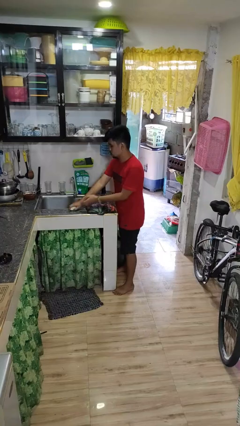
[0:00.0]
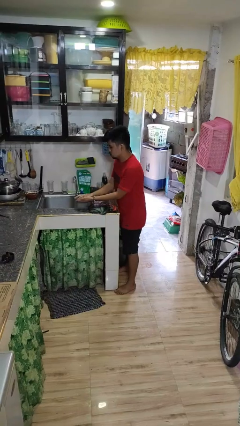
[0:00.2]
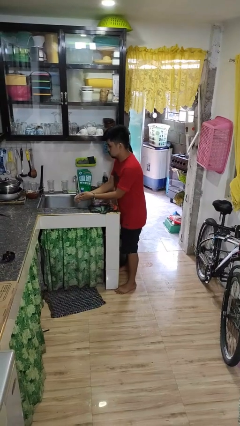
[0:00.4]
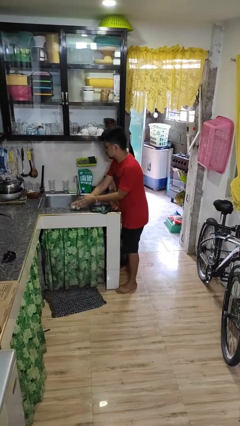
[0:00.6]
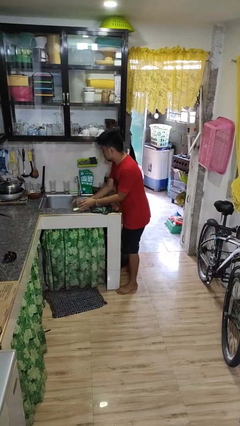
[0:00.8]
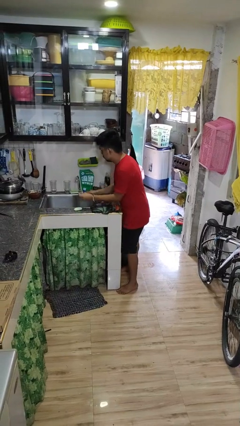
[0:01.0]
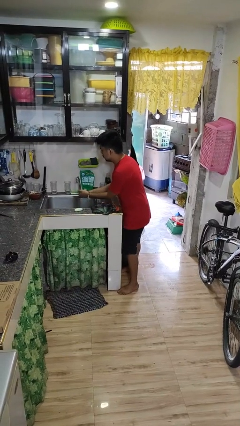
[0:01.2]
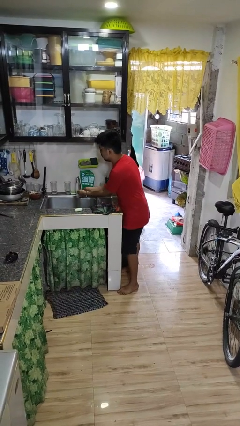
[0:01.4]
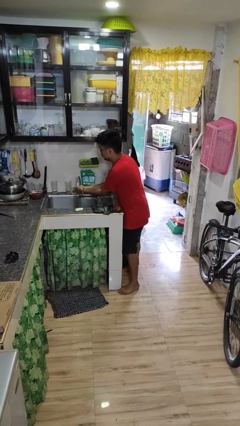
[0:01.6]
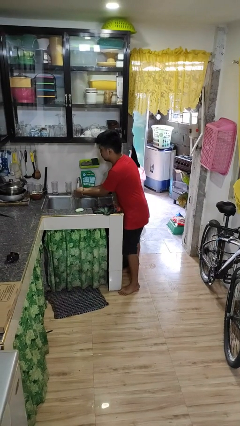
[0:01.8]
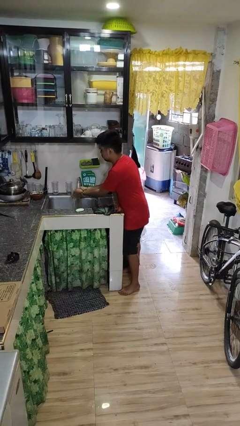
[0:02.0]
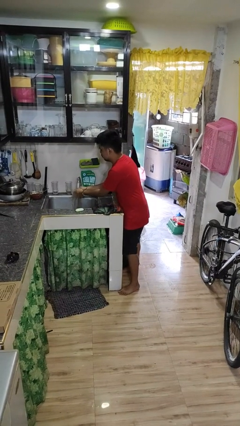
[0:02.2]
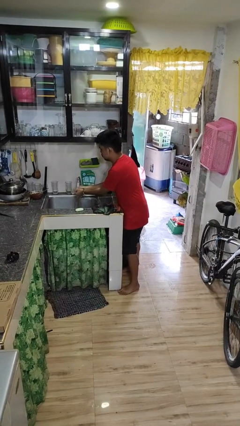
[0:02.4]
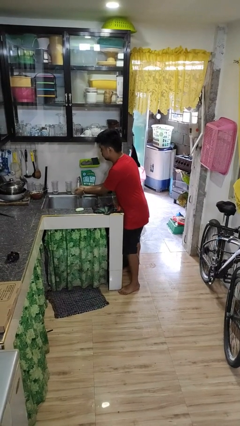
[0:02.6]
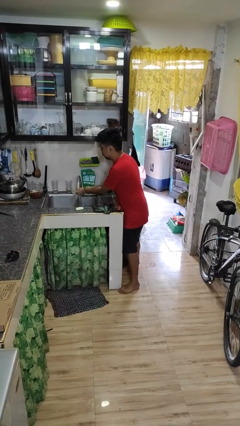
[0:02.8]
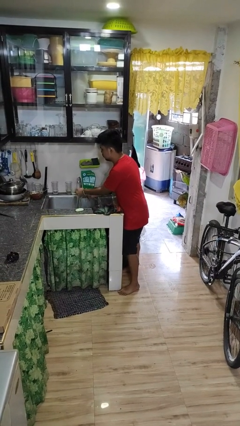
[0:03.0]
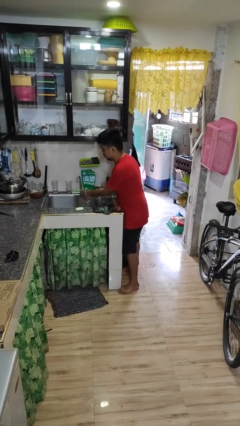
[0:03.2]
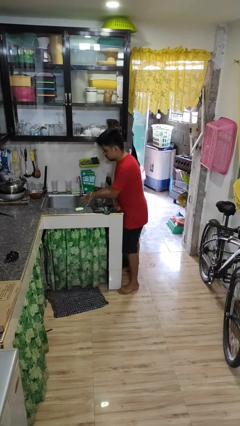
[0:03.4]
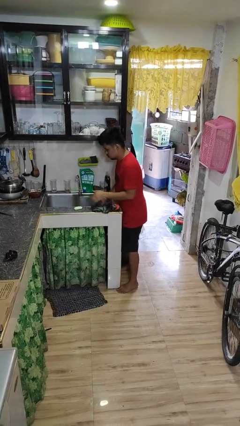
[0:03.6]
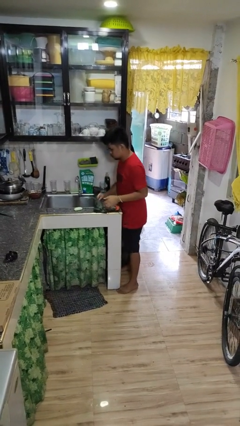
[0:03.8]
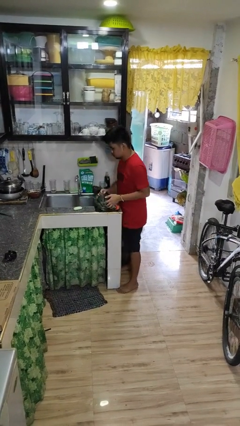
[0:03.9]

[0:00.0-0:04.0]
person washes hands

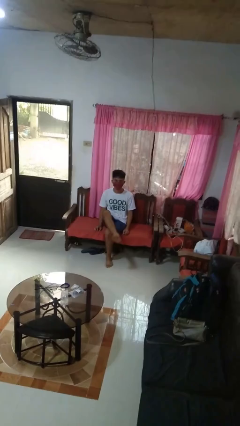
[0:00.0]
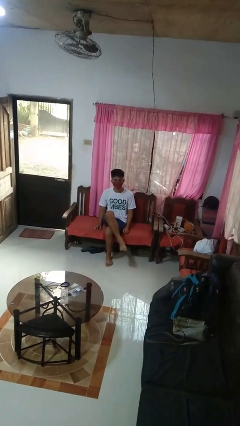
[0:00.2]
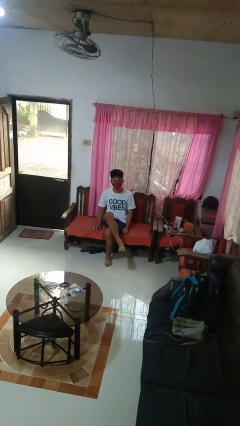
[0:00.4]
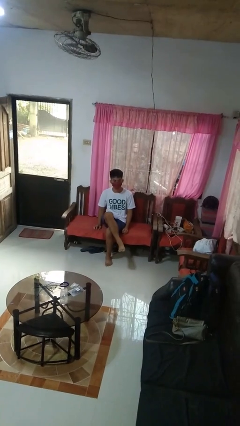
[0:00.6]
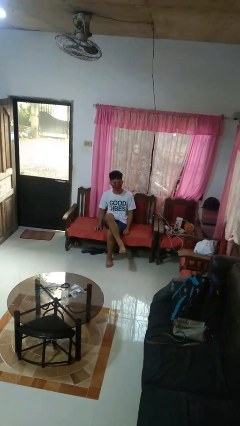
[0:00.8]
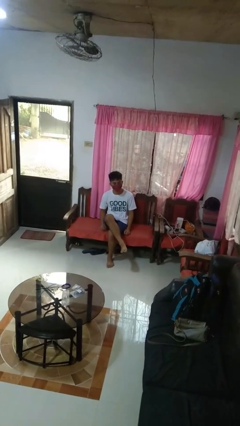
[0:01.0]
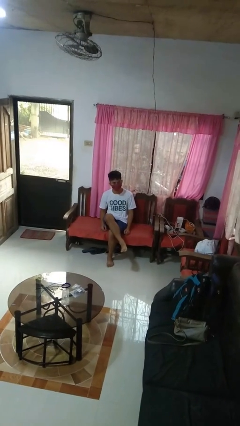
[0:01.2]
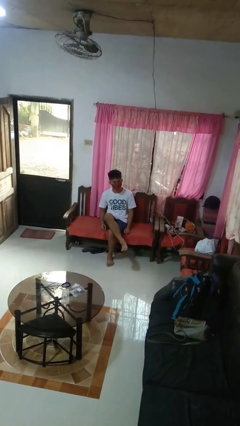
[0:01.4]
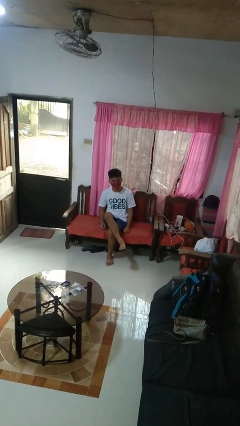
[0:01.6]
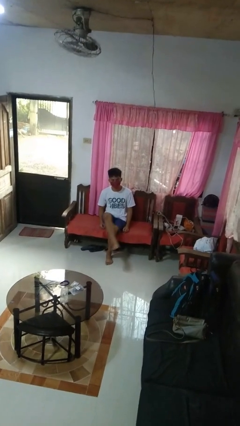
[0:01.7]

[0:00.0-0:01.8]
person crosses legs

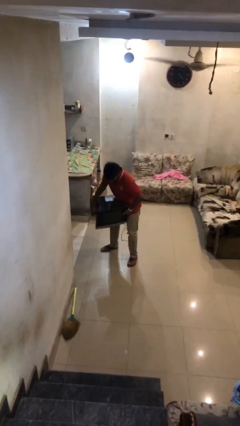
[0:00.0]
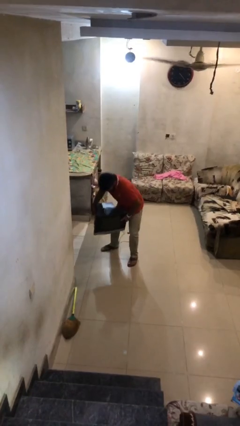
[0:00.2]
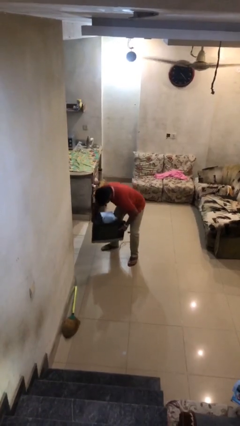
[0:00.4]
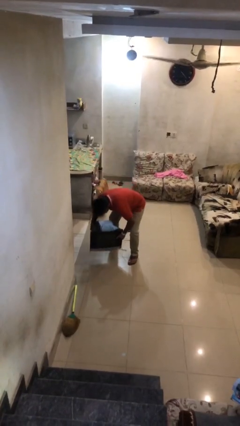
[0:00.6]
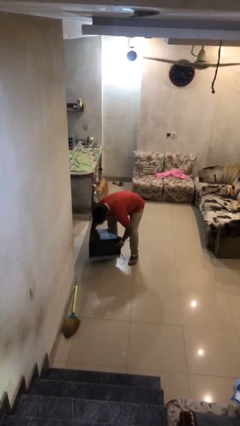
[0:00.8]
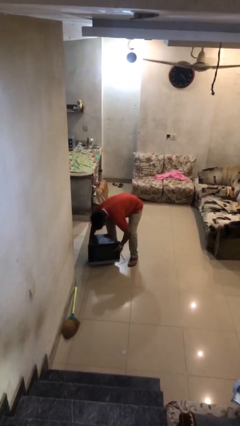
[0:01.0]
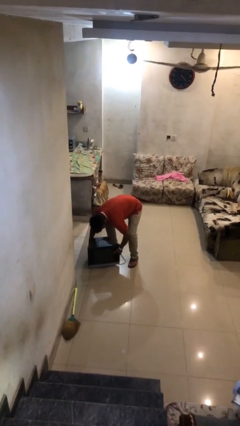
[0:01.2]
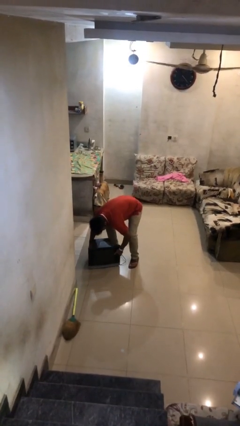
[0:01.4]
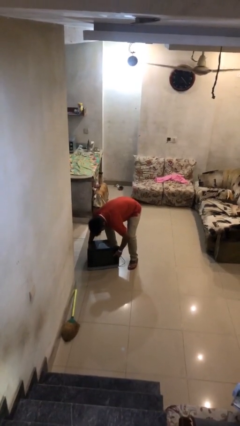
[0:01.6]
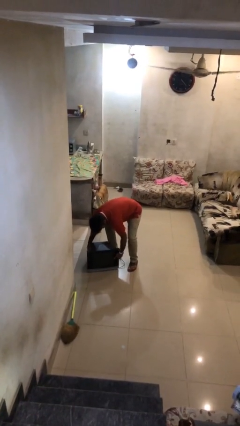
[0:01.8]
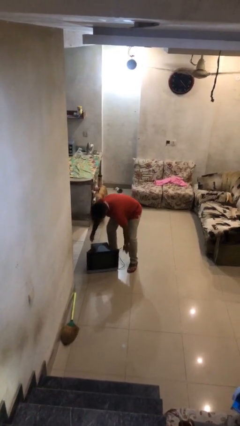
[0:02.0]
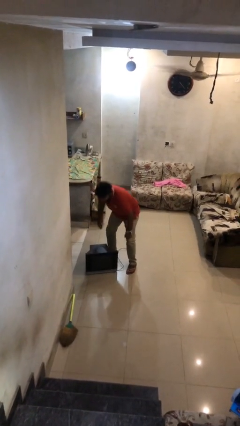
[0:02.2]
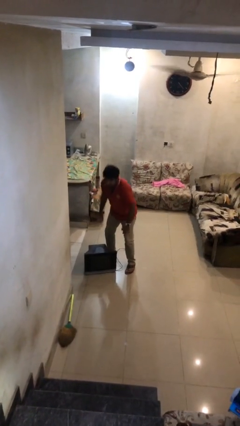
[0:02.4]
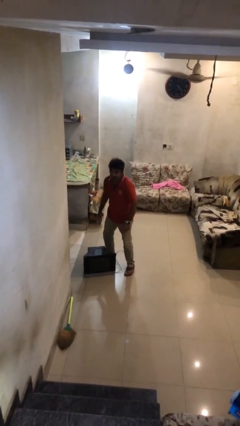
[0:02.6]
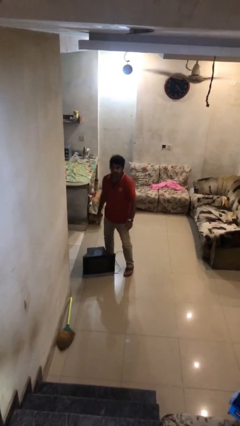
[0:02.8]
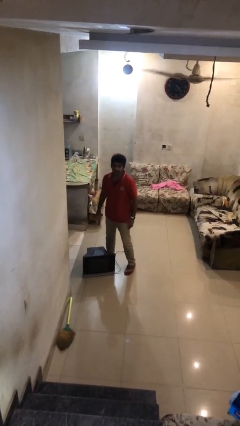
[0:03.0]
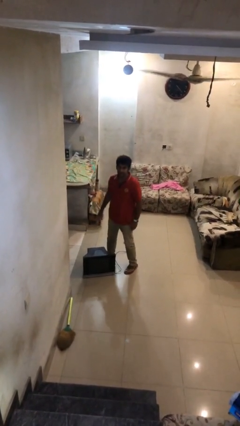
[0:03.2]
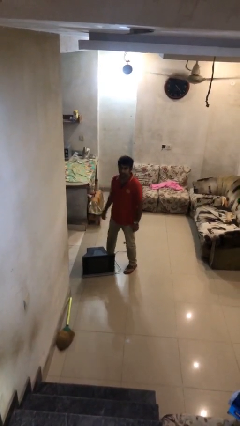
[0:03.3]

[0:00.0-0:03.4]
person puts down object on floor

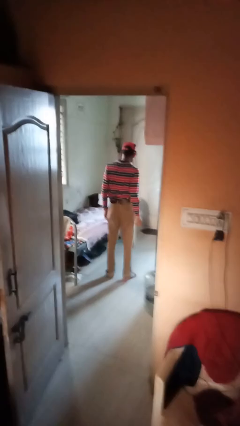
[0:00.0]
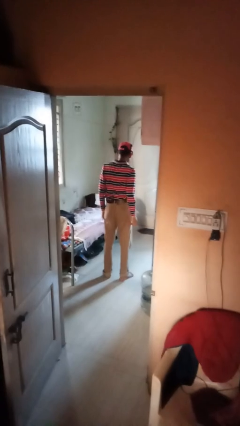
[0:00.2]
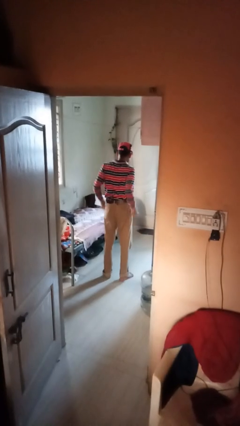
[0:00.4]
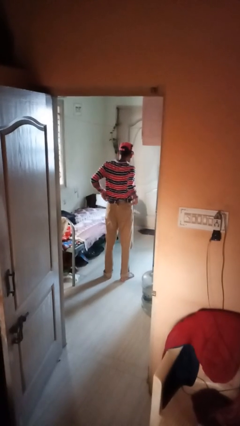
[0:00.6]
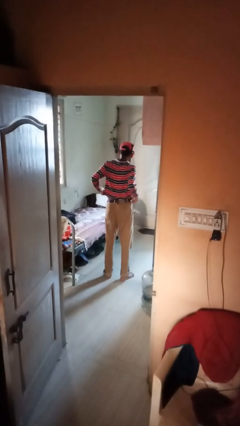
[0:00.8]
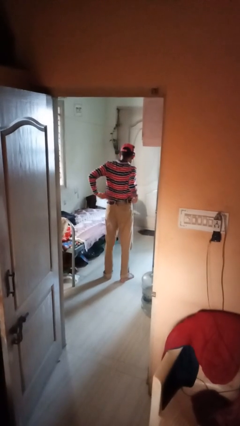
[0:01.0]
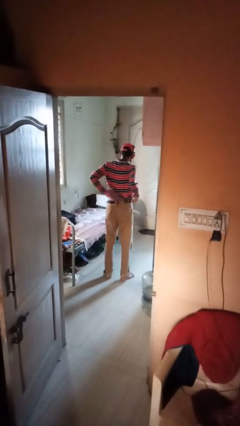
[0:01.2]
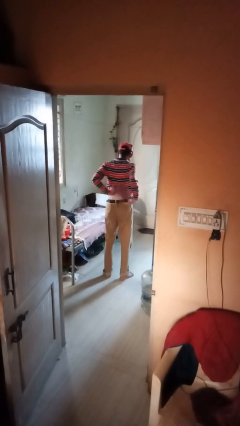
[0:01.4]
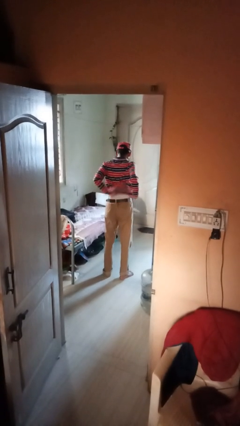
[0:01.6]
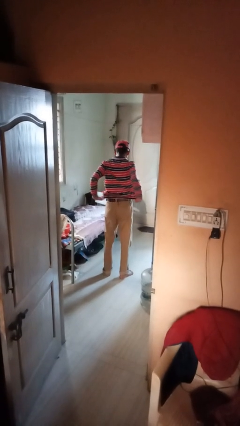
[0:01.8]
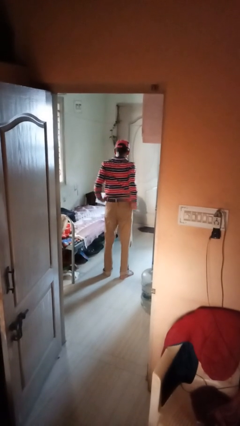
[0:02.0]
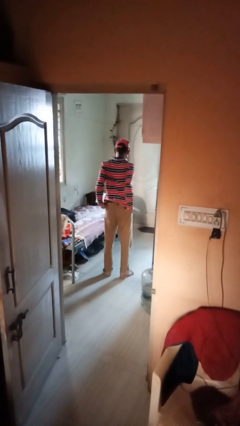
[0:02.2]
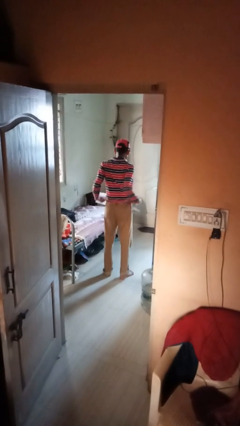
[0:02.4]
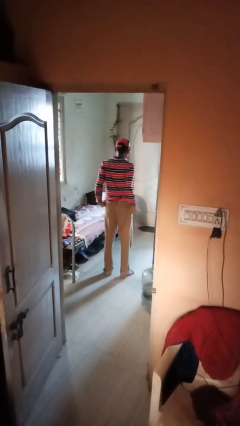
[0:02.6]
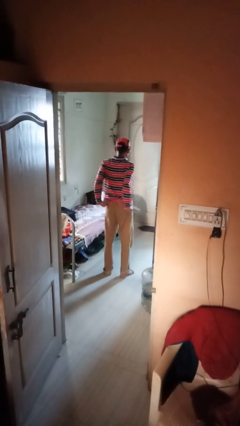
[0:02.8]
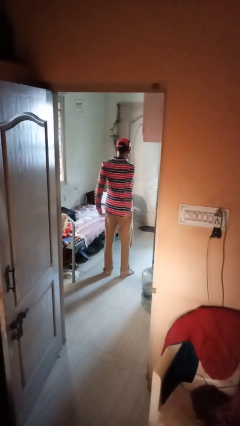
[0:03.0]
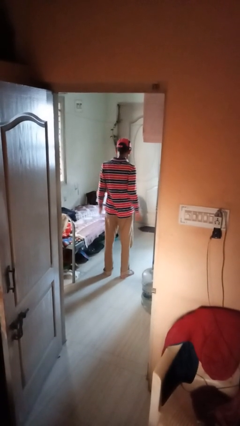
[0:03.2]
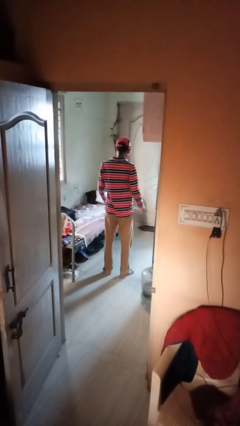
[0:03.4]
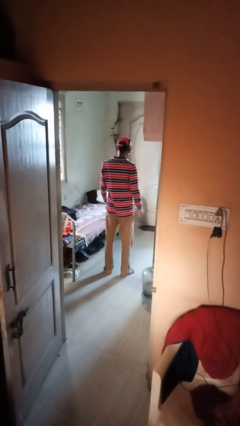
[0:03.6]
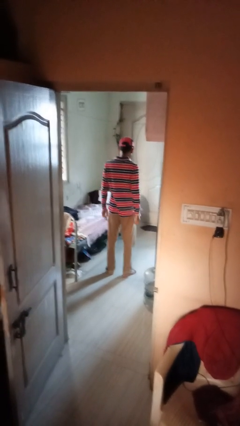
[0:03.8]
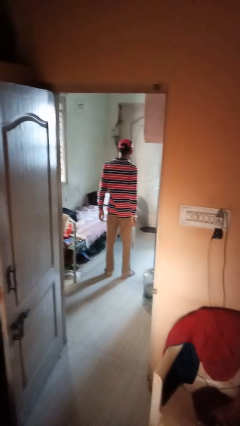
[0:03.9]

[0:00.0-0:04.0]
person untucks shirt

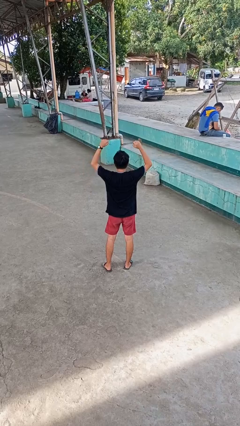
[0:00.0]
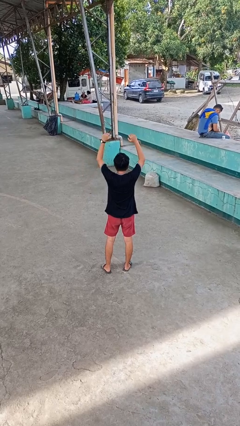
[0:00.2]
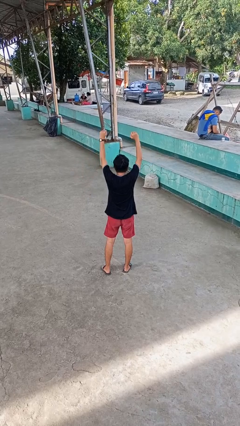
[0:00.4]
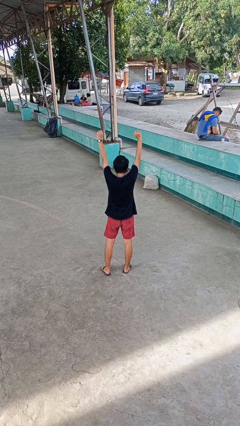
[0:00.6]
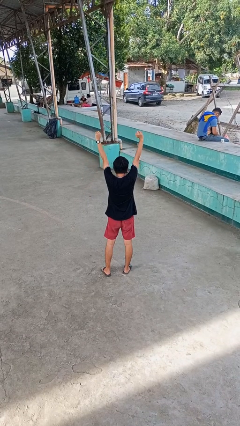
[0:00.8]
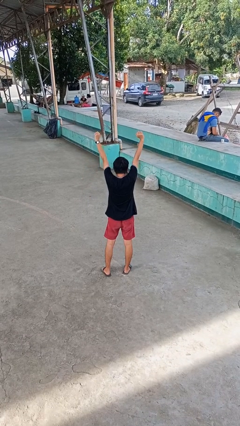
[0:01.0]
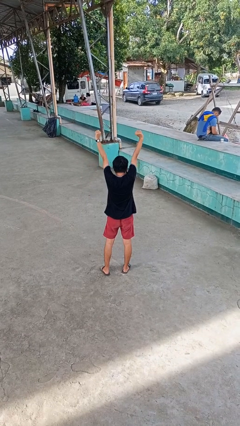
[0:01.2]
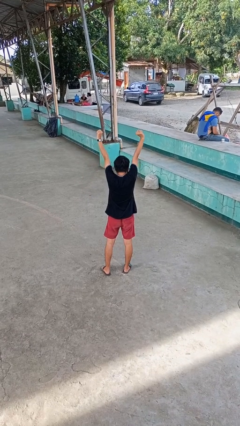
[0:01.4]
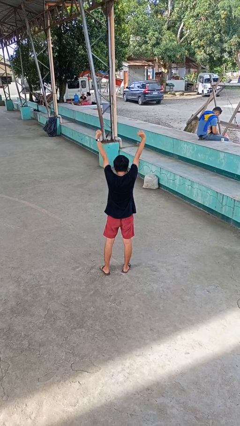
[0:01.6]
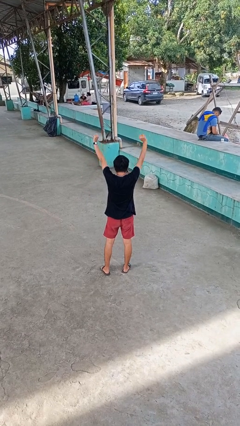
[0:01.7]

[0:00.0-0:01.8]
person stretches arms over head

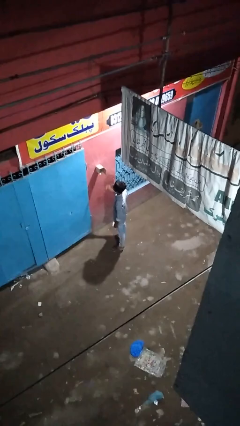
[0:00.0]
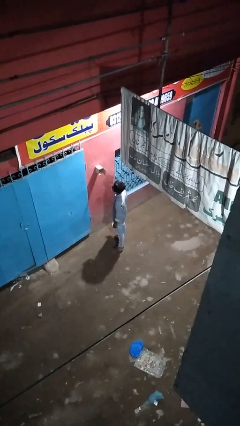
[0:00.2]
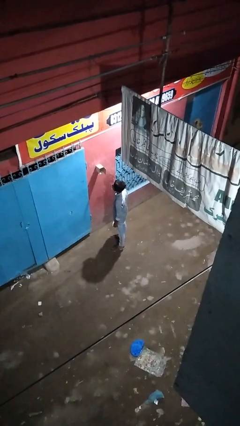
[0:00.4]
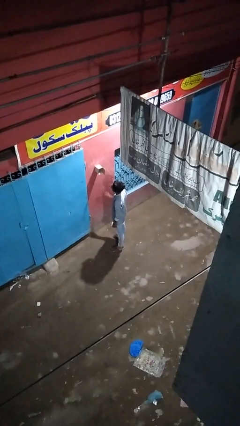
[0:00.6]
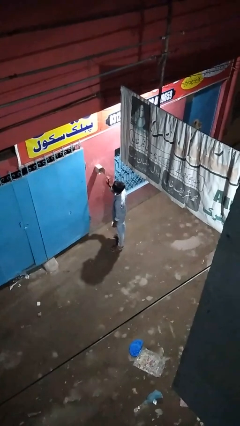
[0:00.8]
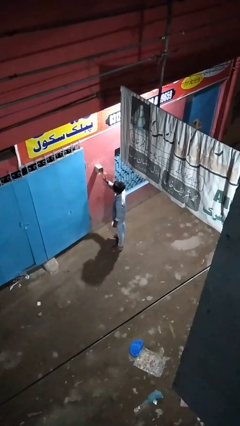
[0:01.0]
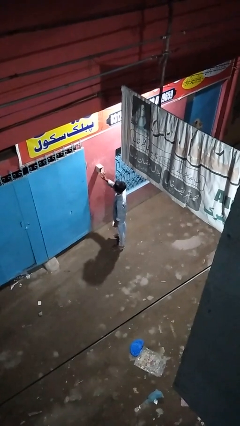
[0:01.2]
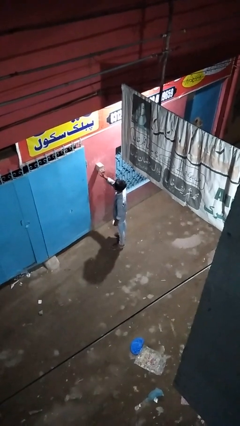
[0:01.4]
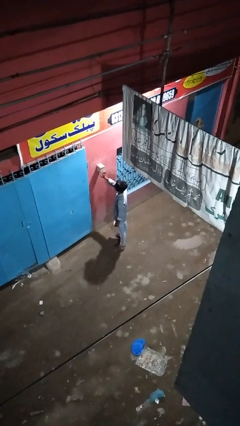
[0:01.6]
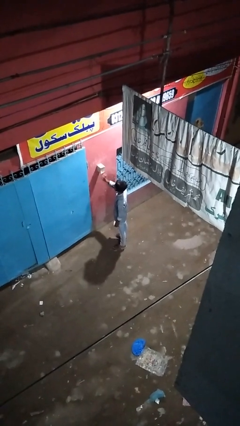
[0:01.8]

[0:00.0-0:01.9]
person closes mailbox

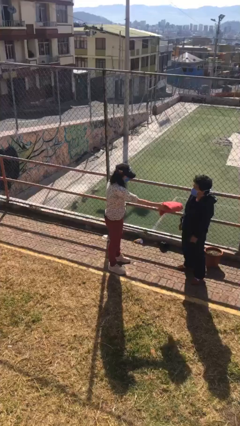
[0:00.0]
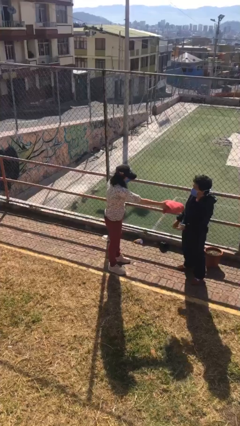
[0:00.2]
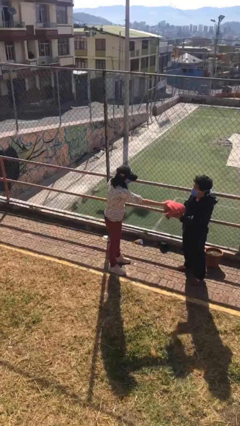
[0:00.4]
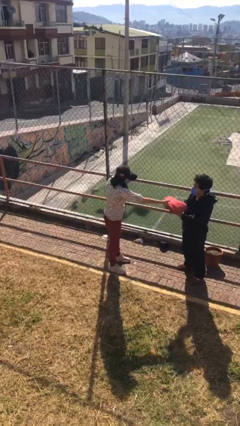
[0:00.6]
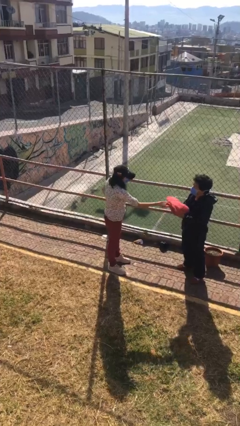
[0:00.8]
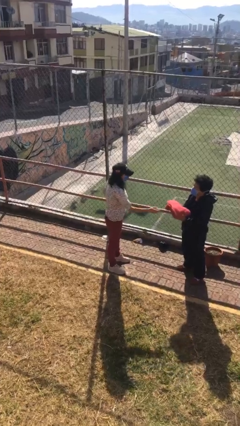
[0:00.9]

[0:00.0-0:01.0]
person transfers object to person
